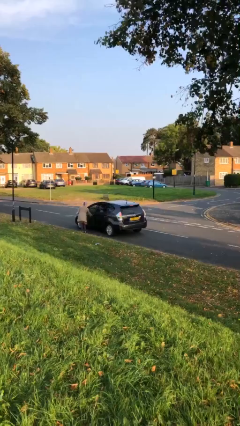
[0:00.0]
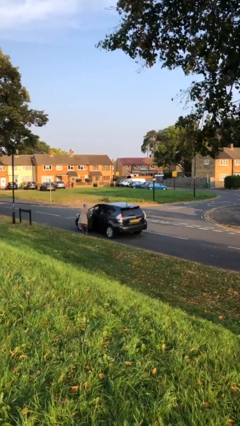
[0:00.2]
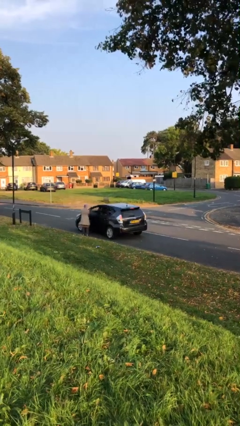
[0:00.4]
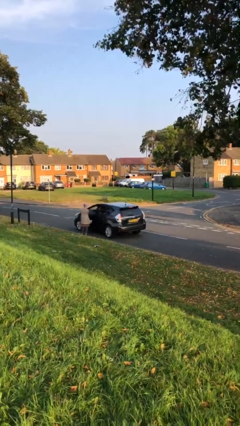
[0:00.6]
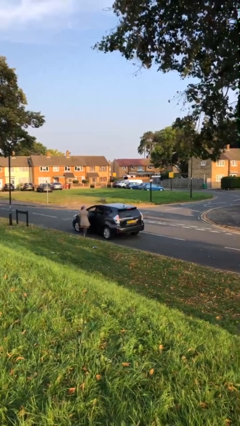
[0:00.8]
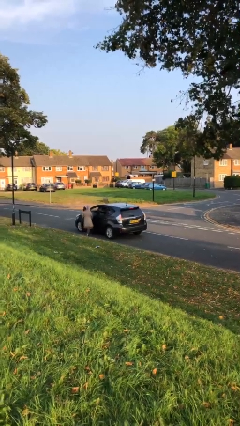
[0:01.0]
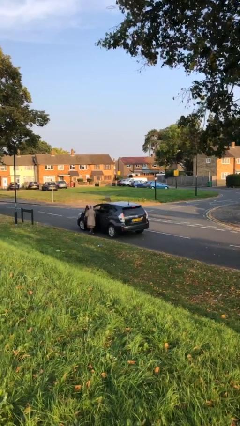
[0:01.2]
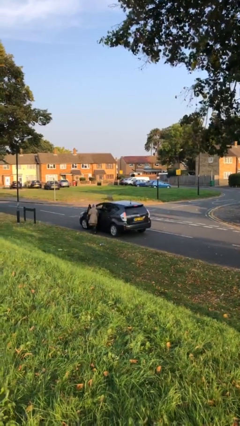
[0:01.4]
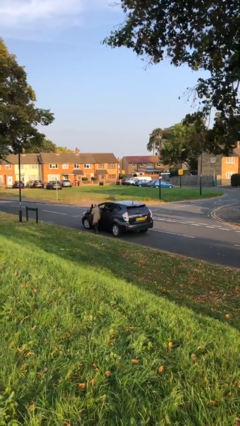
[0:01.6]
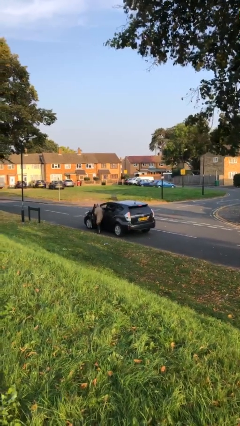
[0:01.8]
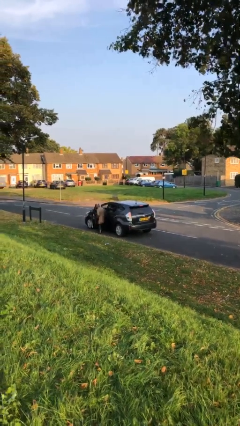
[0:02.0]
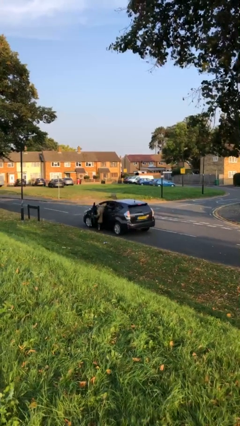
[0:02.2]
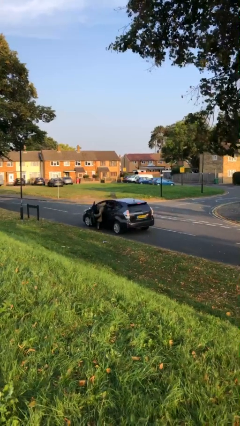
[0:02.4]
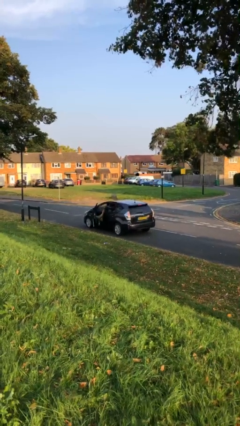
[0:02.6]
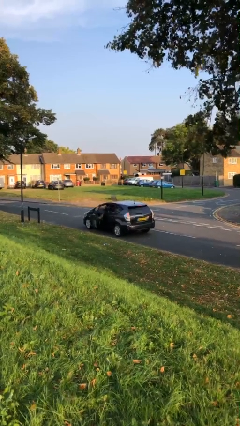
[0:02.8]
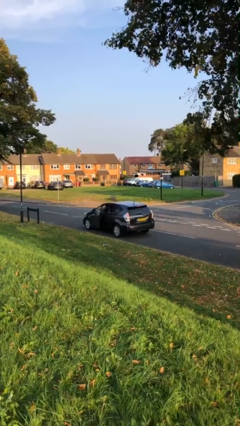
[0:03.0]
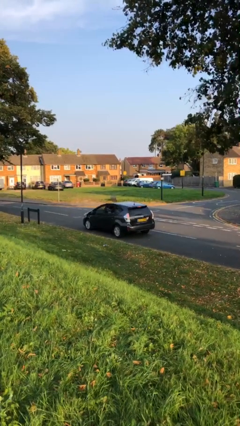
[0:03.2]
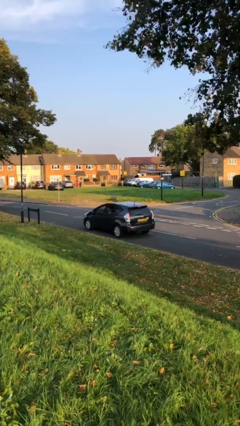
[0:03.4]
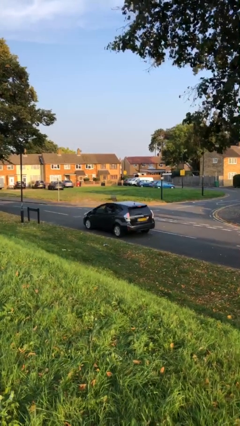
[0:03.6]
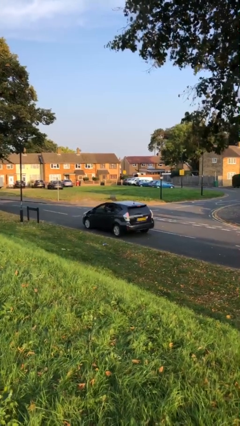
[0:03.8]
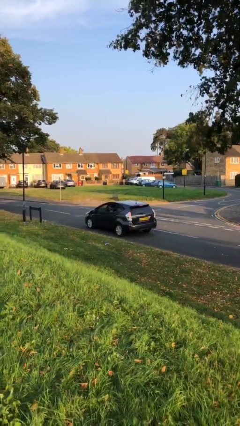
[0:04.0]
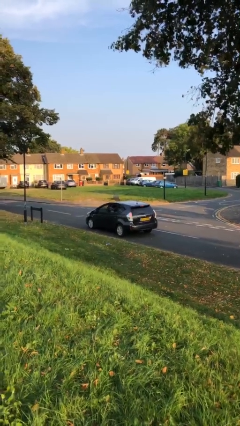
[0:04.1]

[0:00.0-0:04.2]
car picks up person

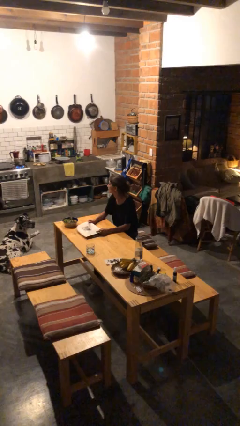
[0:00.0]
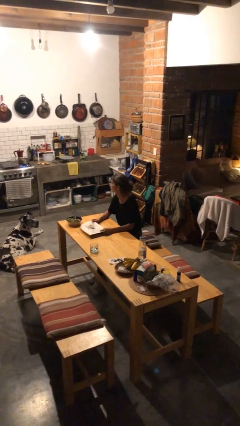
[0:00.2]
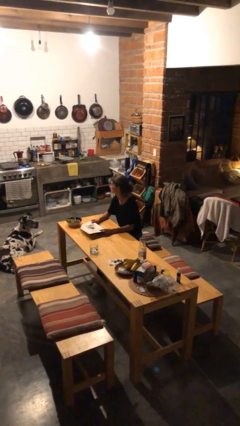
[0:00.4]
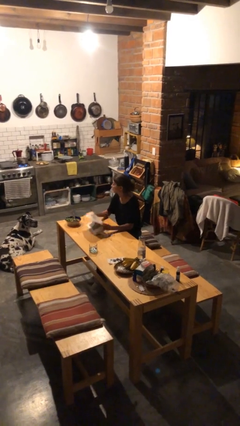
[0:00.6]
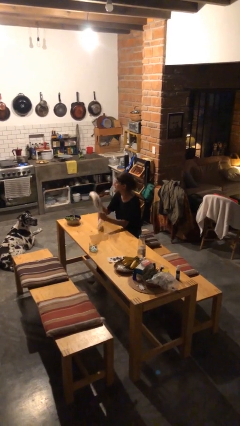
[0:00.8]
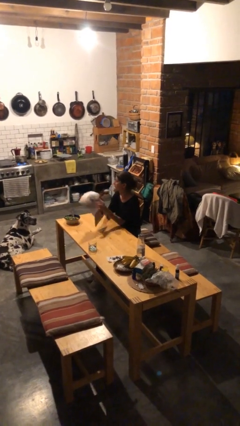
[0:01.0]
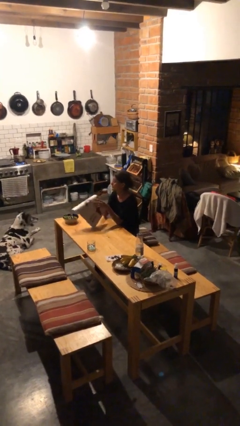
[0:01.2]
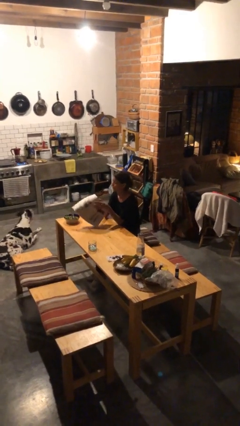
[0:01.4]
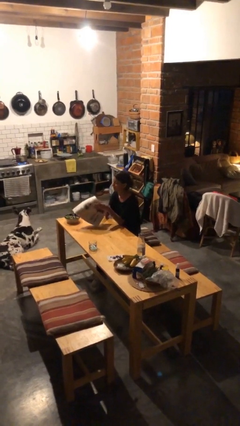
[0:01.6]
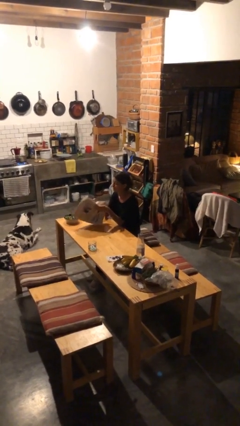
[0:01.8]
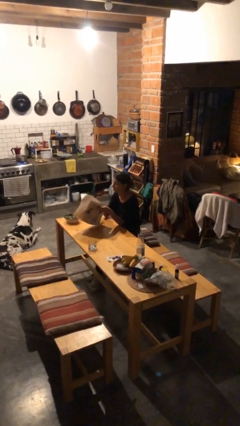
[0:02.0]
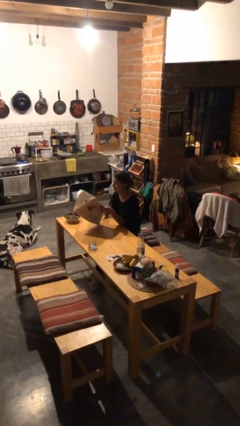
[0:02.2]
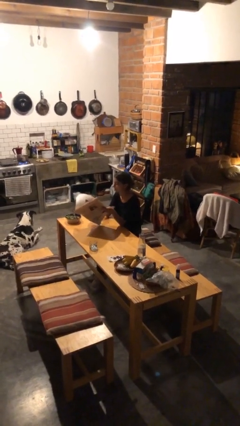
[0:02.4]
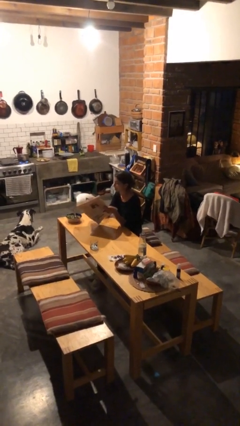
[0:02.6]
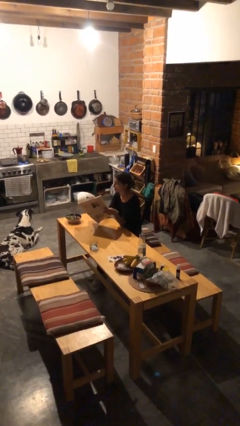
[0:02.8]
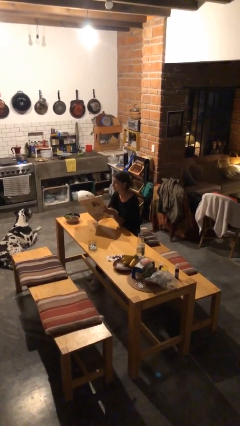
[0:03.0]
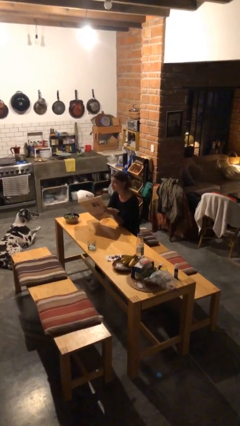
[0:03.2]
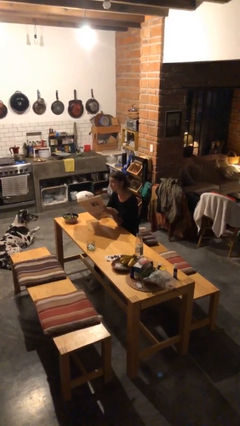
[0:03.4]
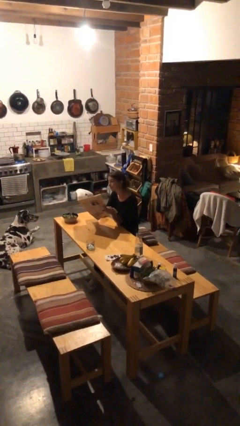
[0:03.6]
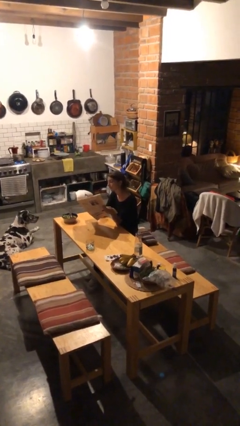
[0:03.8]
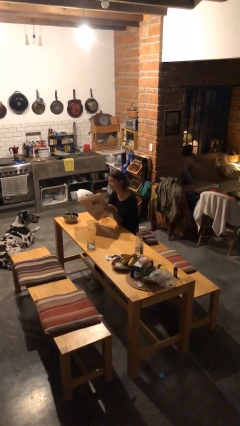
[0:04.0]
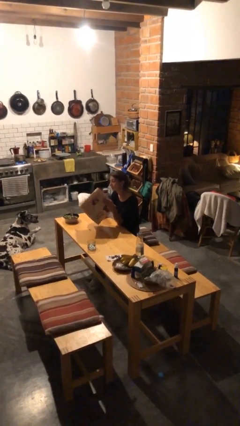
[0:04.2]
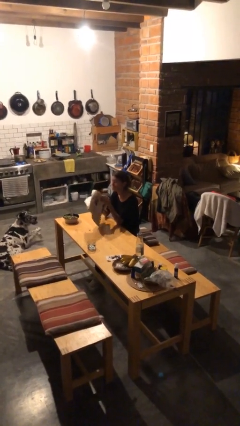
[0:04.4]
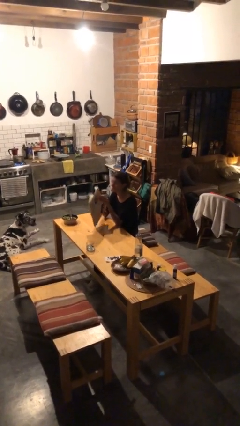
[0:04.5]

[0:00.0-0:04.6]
person reads newspaper

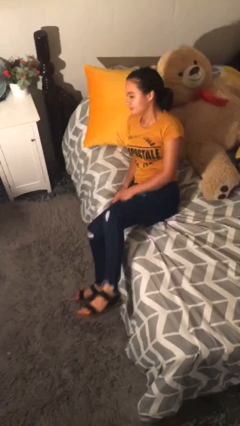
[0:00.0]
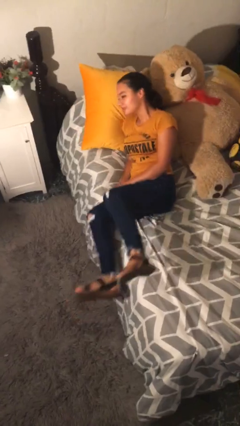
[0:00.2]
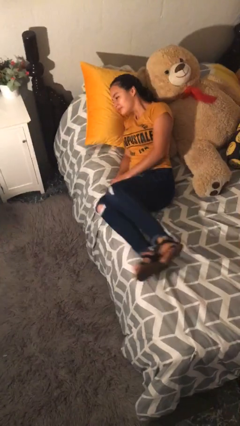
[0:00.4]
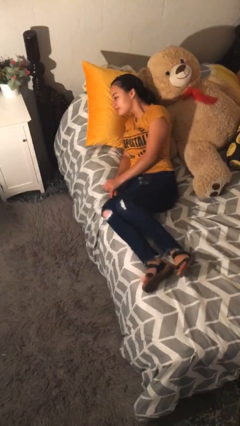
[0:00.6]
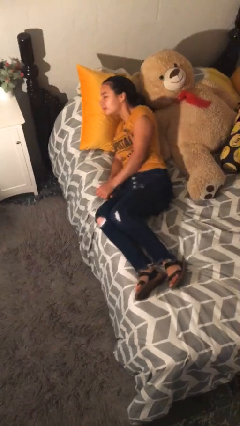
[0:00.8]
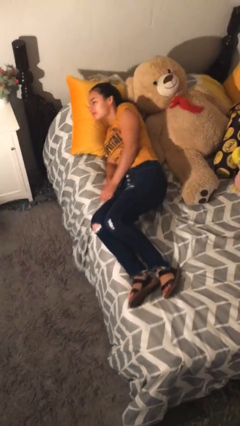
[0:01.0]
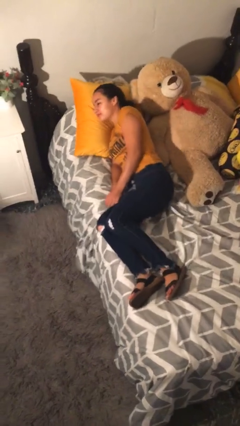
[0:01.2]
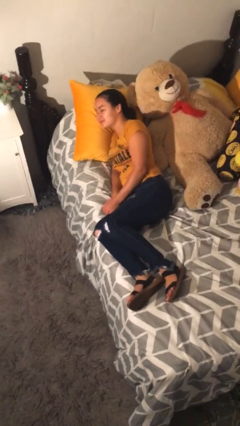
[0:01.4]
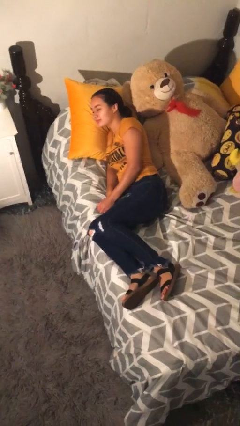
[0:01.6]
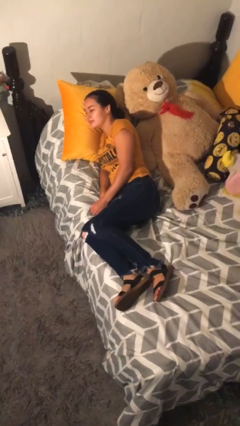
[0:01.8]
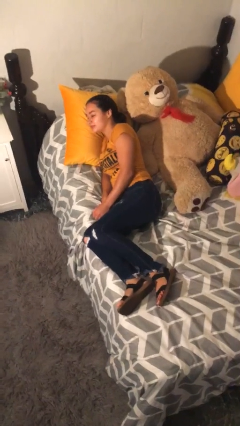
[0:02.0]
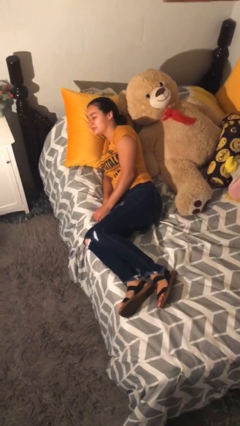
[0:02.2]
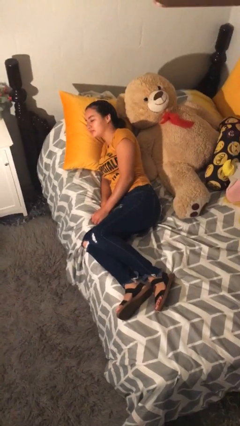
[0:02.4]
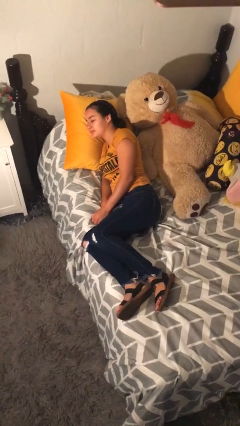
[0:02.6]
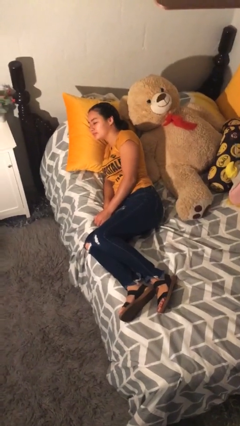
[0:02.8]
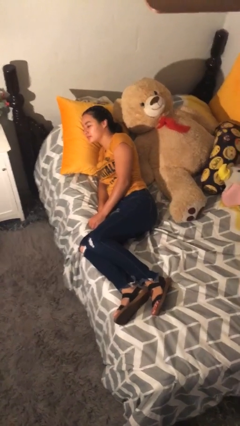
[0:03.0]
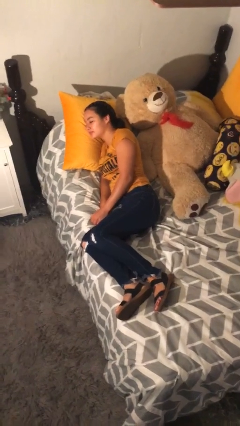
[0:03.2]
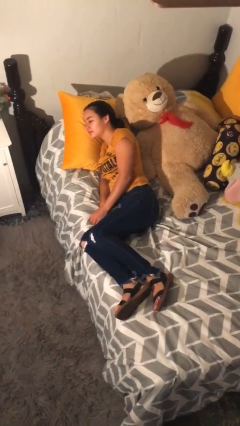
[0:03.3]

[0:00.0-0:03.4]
person lies down on bed

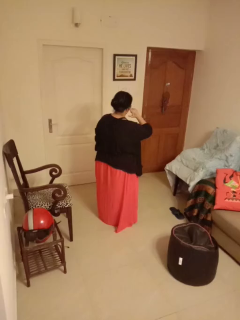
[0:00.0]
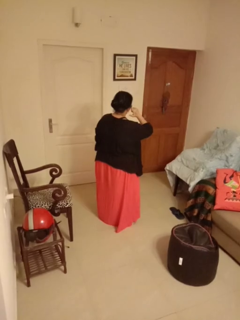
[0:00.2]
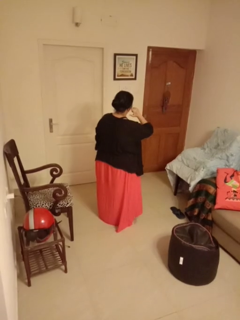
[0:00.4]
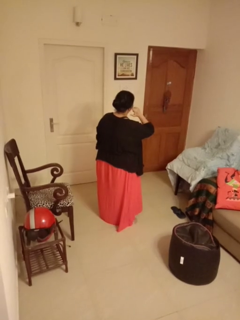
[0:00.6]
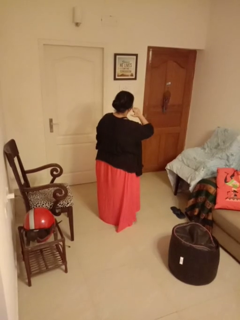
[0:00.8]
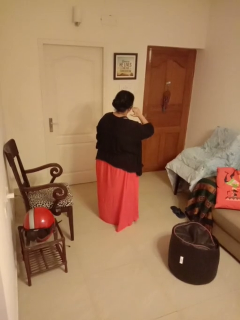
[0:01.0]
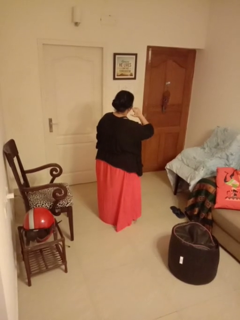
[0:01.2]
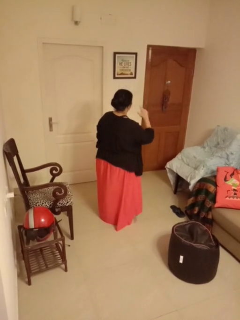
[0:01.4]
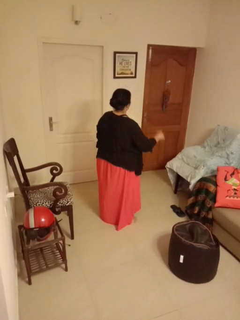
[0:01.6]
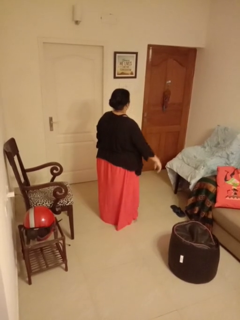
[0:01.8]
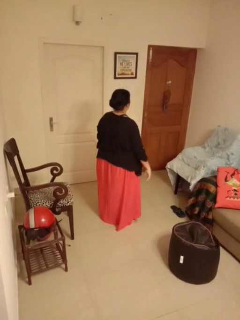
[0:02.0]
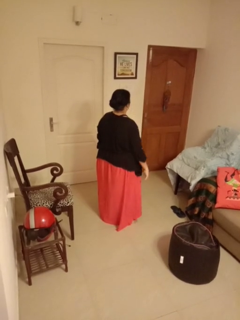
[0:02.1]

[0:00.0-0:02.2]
person gestures listen closely

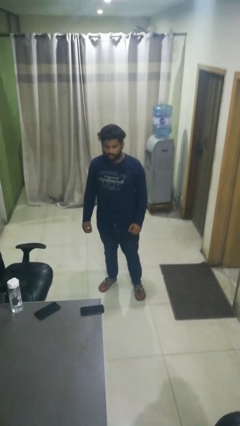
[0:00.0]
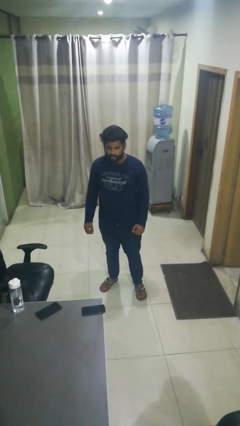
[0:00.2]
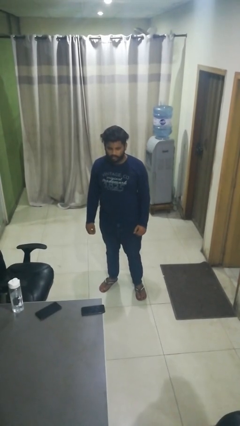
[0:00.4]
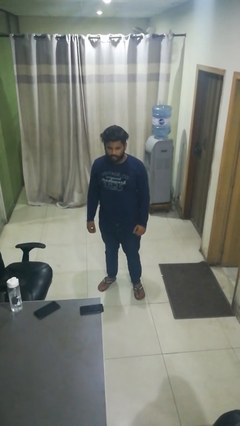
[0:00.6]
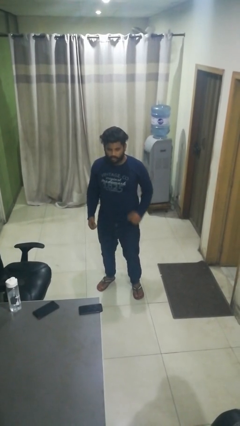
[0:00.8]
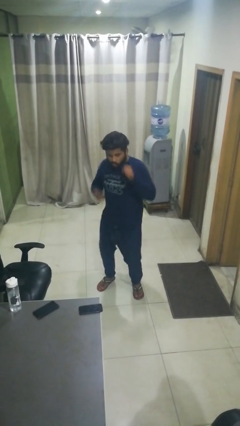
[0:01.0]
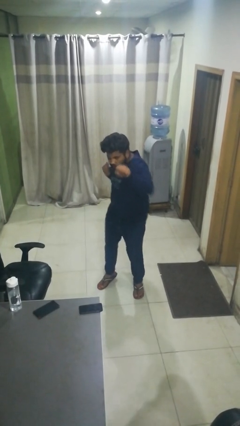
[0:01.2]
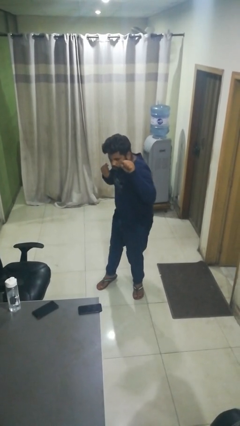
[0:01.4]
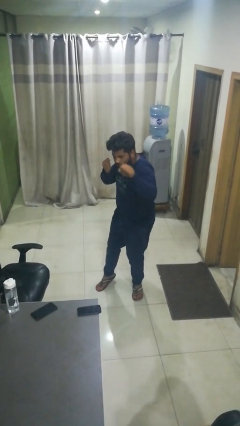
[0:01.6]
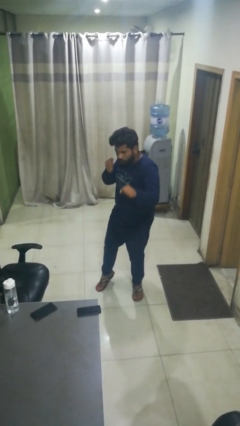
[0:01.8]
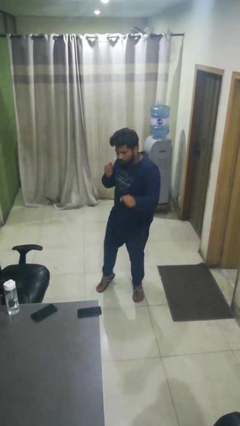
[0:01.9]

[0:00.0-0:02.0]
person punches

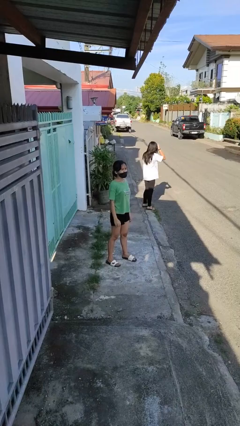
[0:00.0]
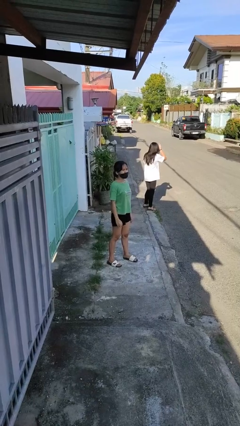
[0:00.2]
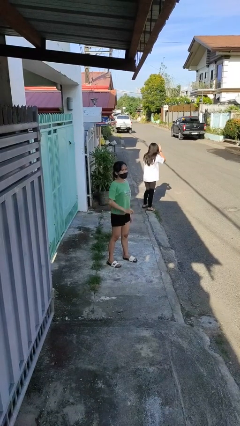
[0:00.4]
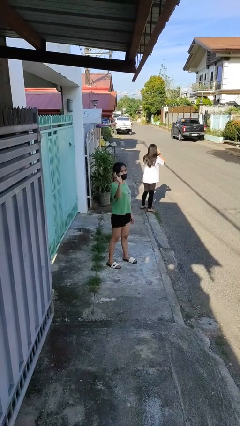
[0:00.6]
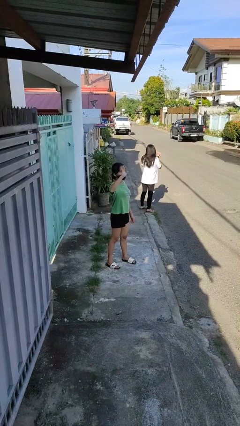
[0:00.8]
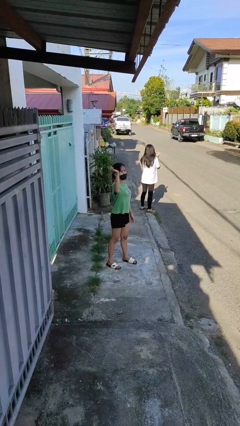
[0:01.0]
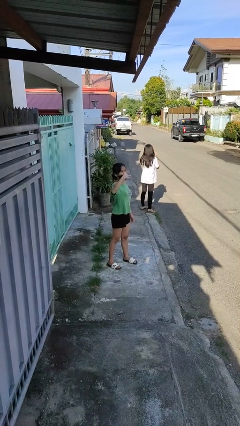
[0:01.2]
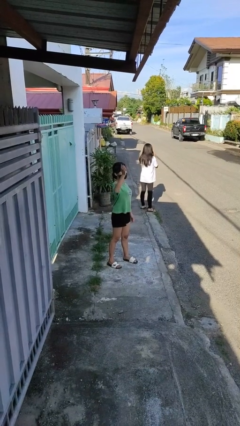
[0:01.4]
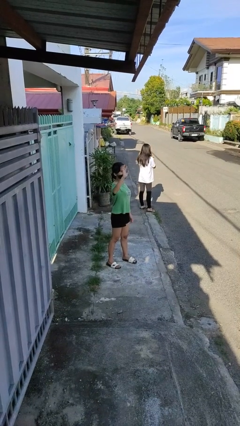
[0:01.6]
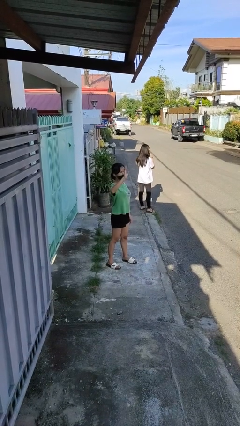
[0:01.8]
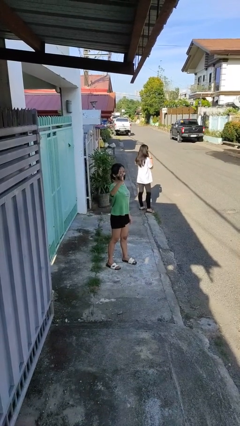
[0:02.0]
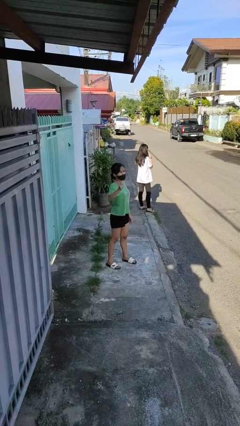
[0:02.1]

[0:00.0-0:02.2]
person waves at person
